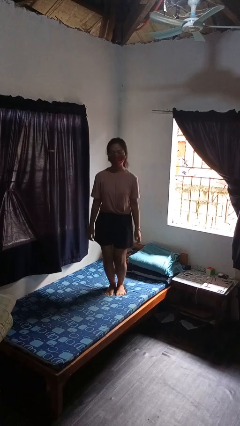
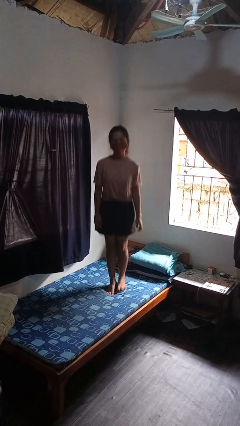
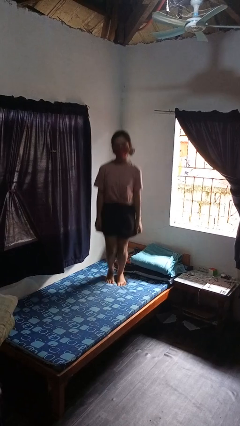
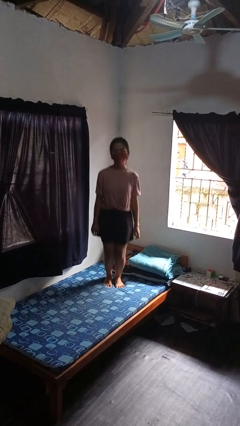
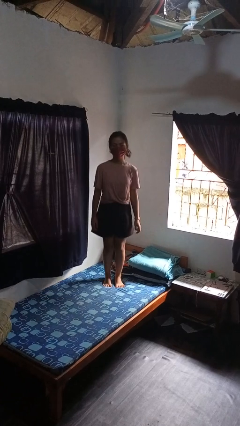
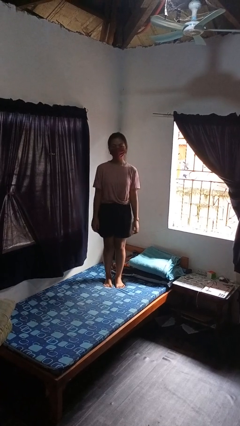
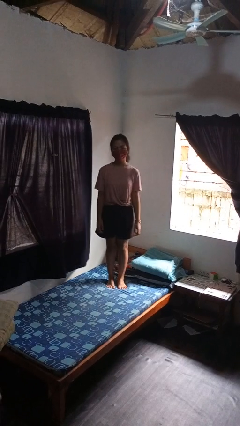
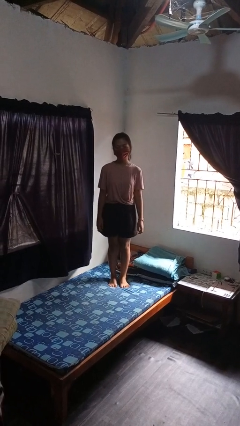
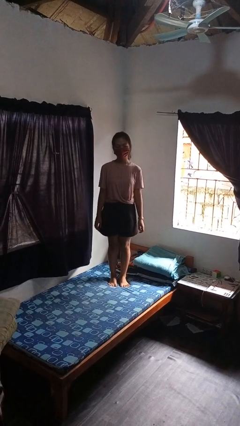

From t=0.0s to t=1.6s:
person jumps on bed

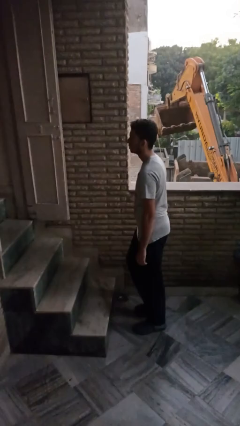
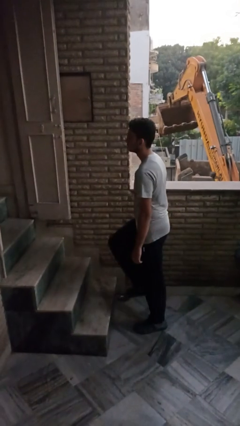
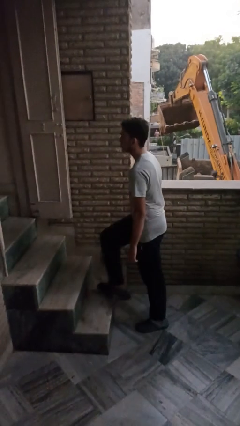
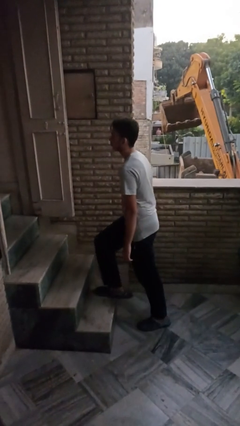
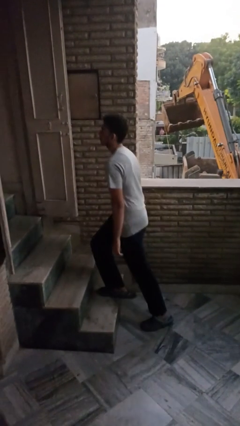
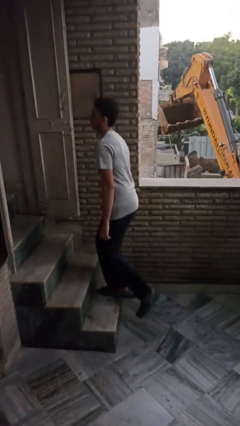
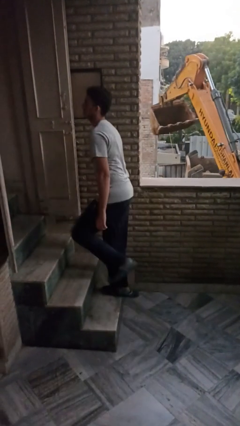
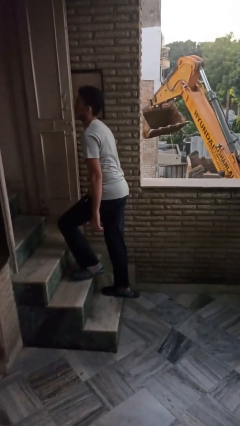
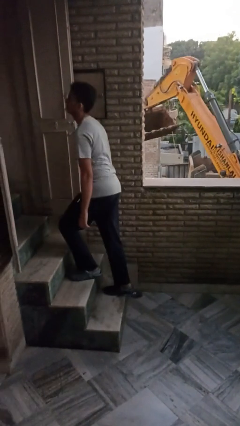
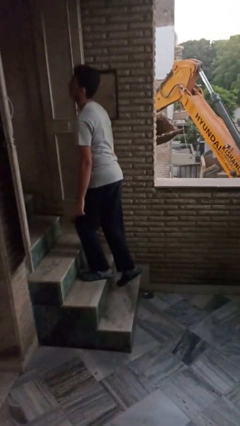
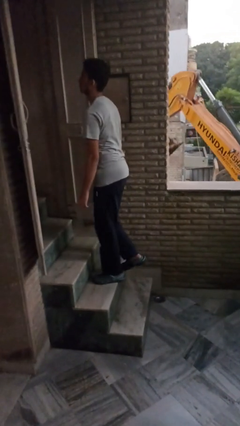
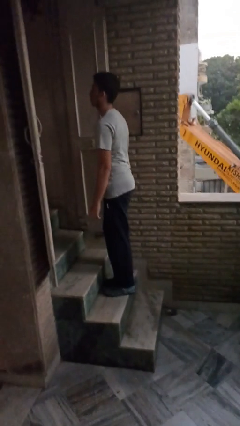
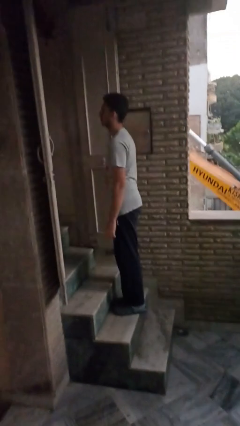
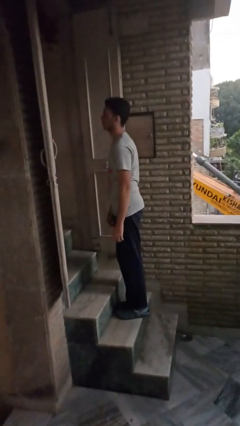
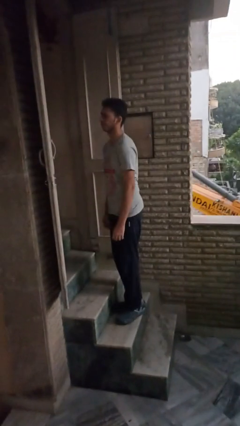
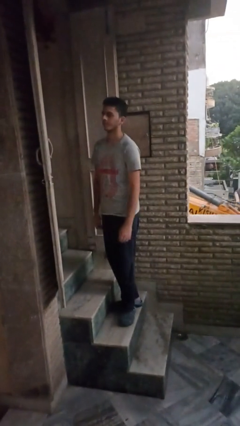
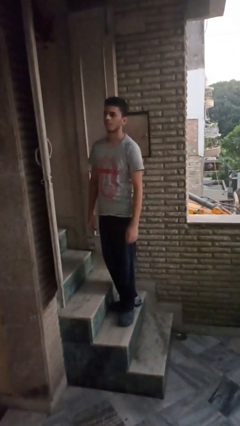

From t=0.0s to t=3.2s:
person climbs up stairs

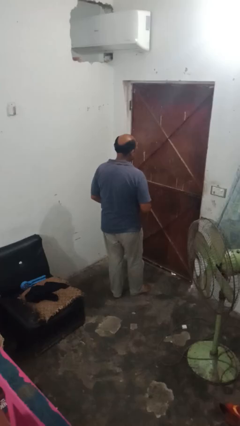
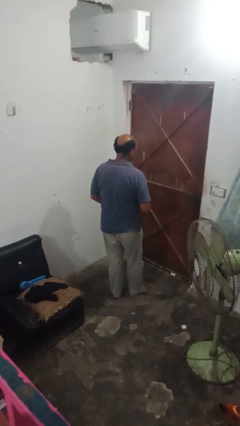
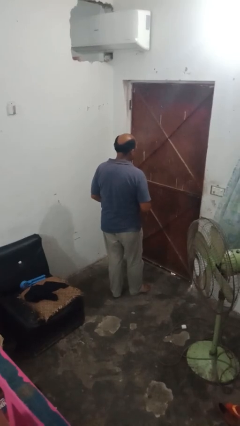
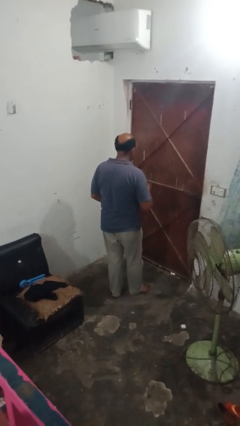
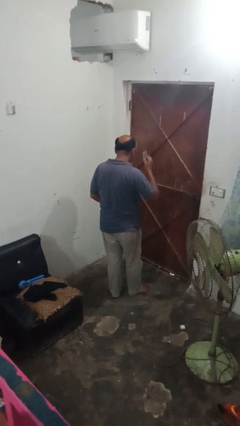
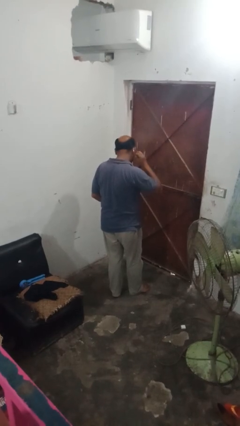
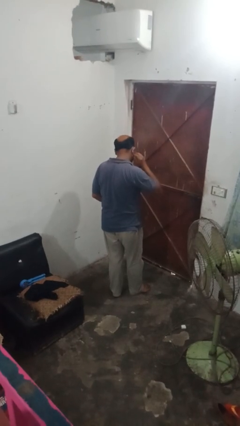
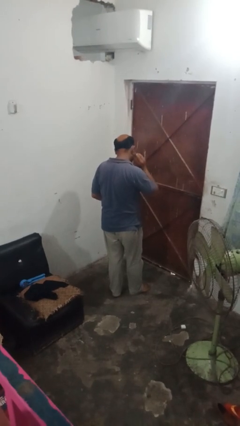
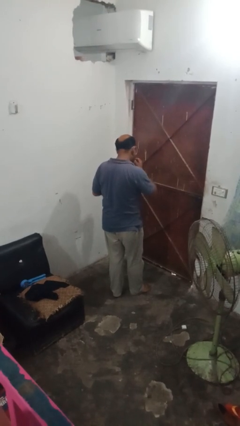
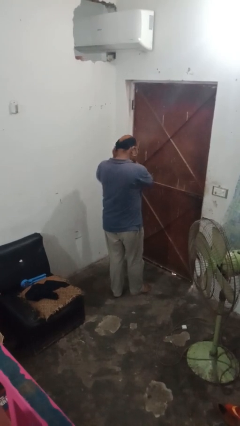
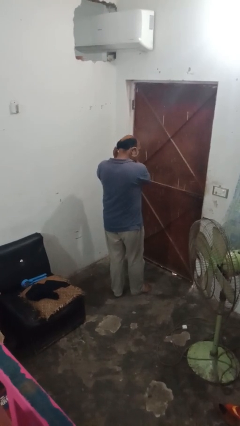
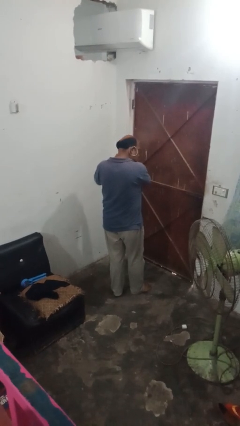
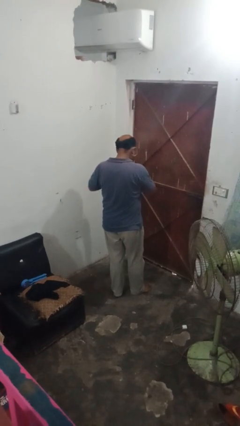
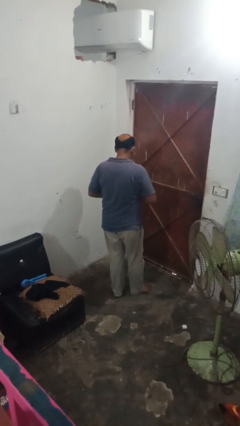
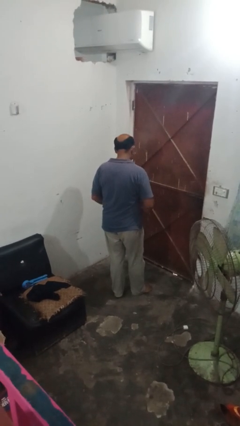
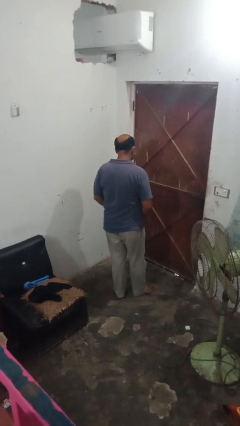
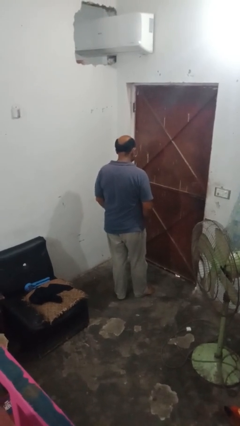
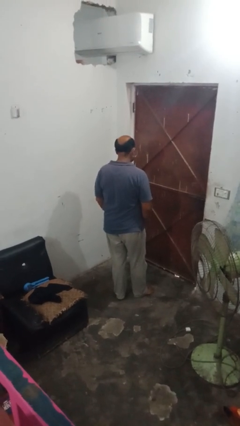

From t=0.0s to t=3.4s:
person puts on earrings

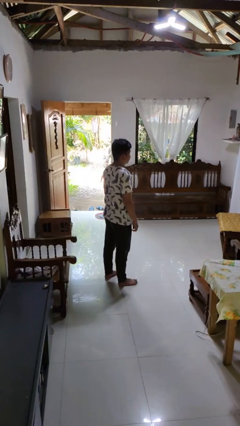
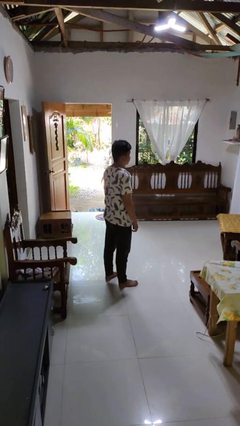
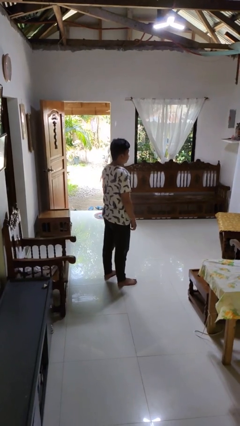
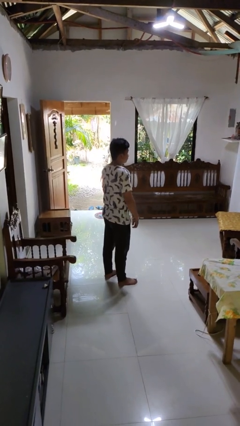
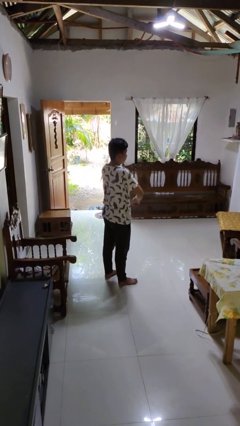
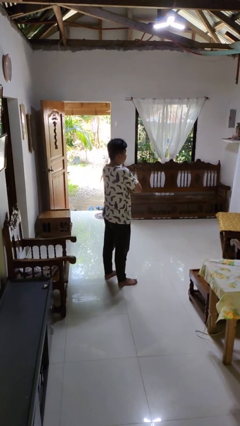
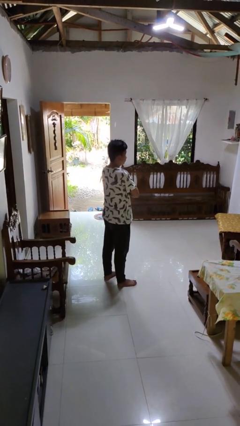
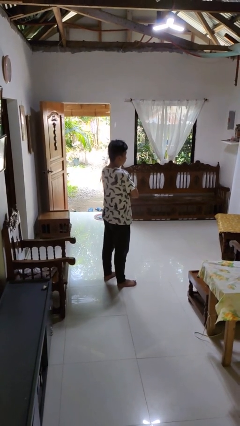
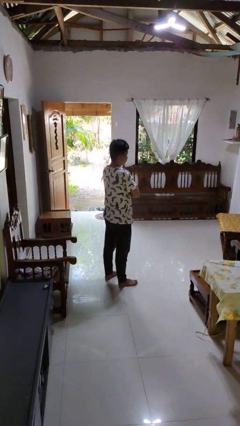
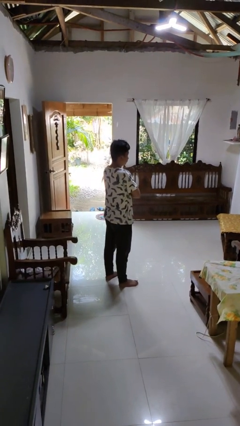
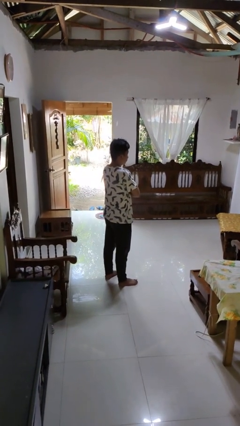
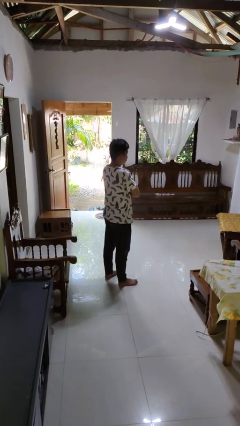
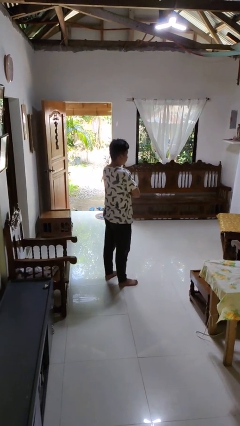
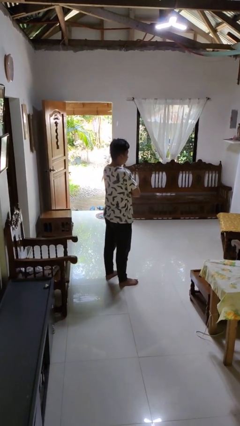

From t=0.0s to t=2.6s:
person crosses arms

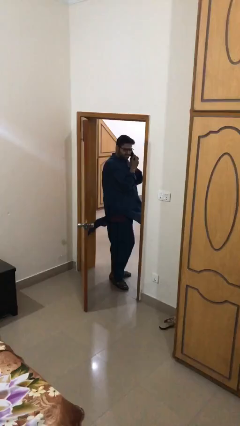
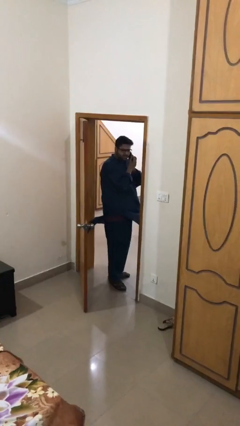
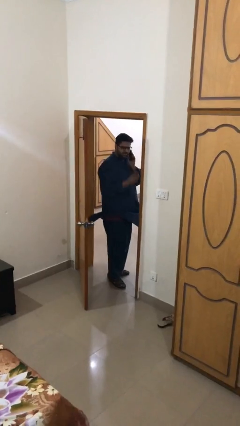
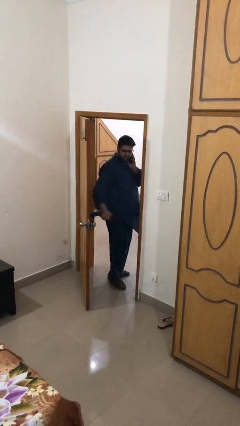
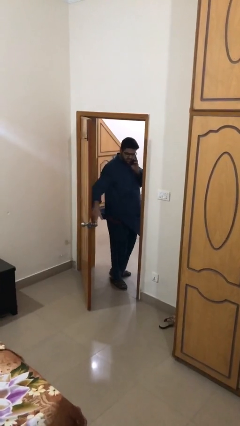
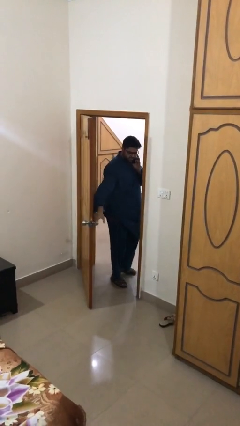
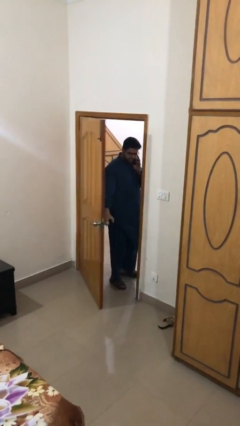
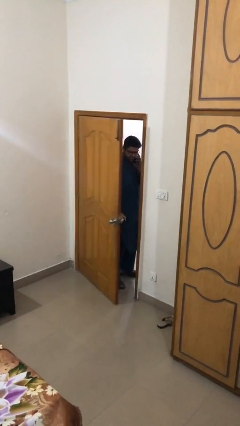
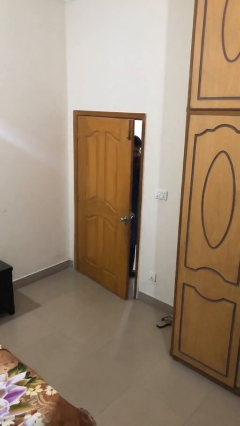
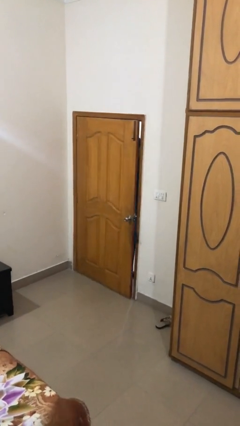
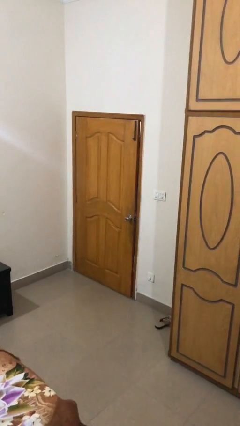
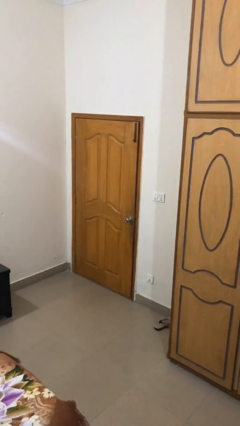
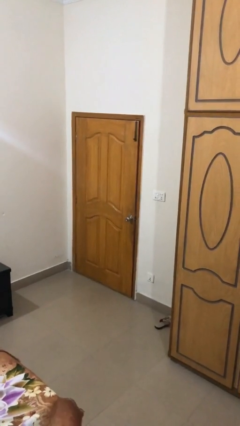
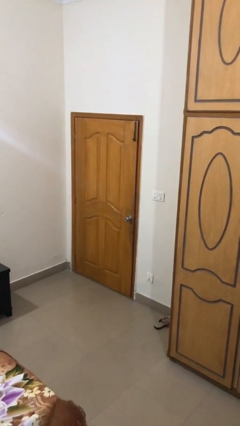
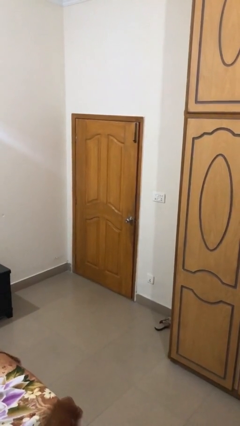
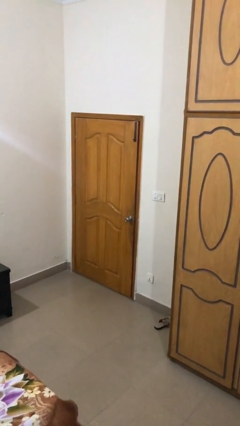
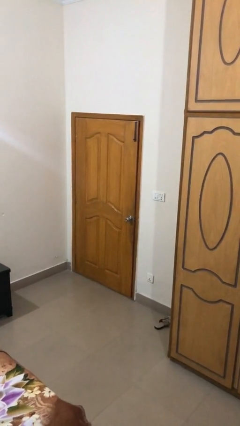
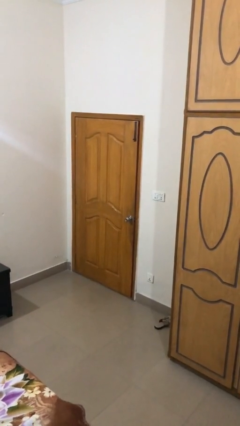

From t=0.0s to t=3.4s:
person closes facility door

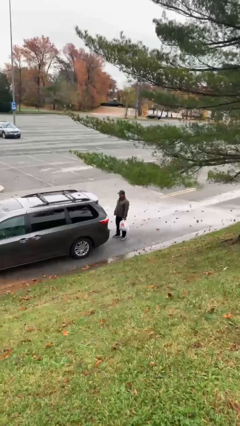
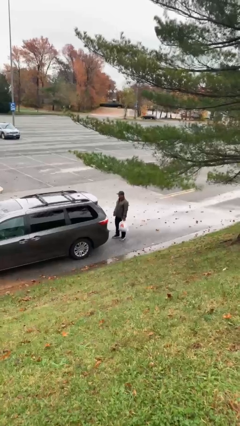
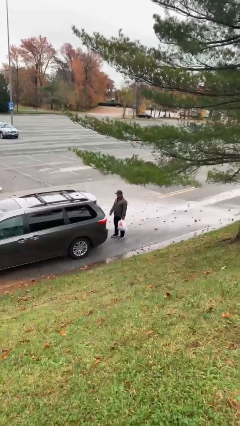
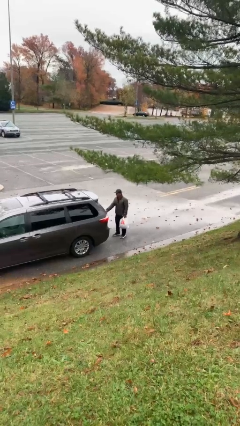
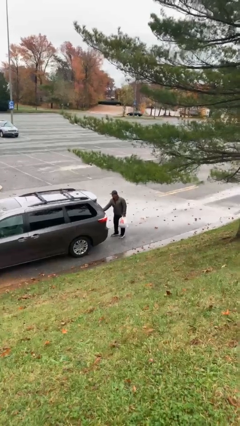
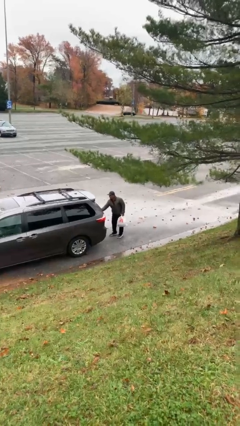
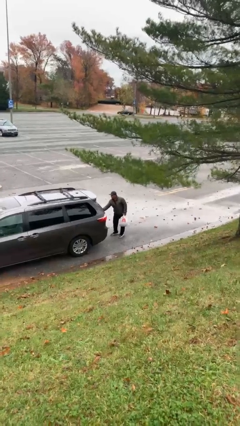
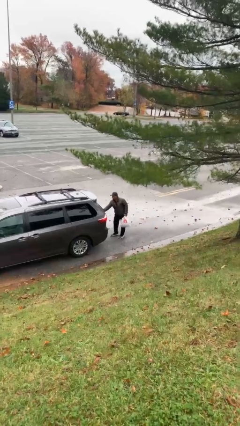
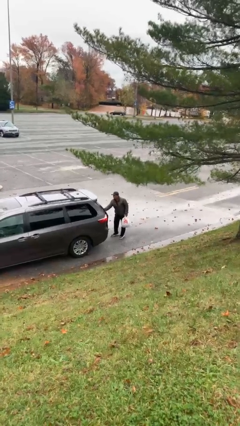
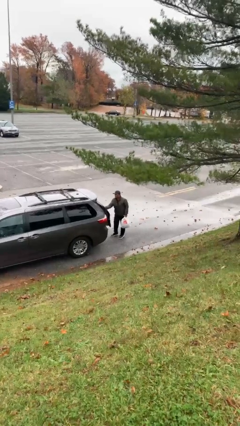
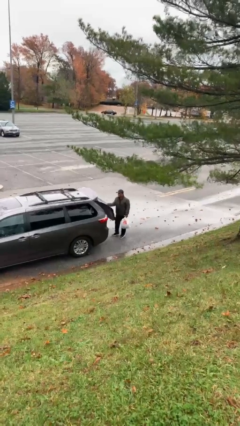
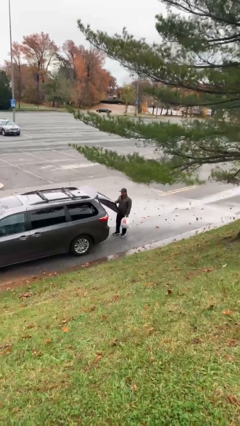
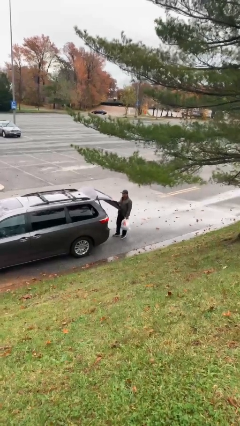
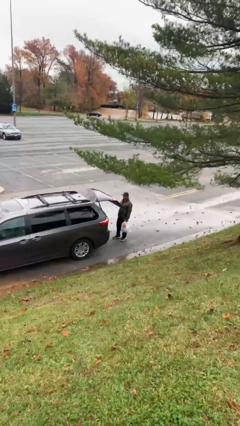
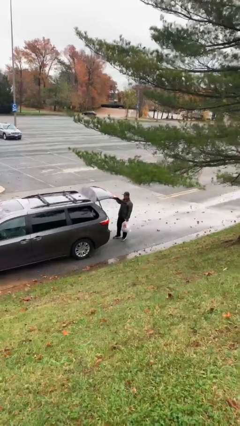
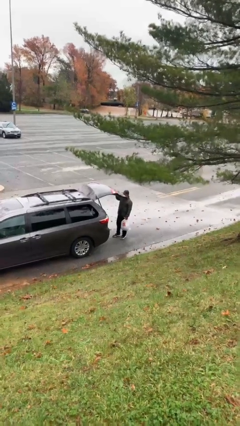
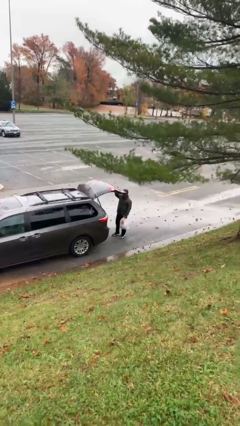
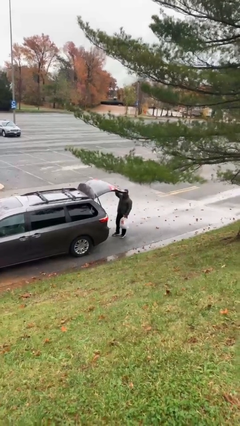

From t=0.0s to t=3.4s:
person opens car trunk
